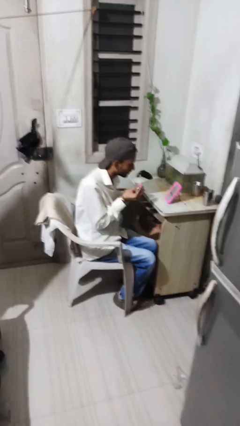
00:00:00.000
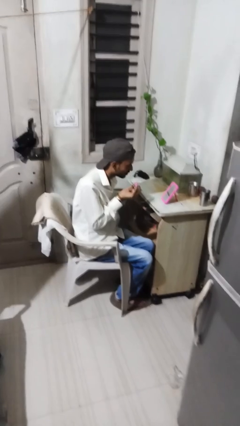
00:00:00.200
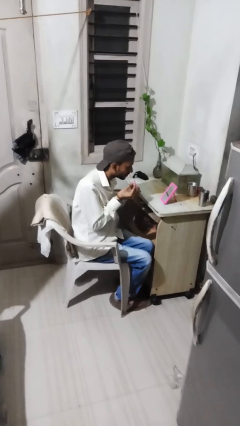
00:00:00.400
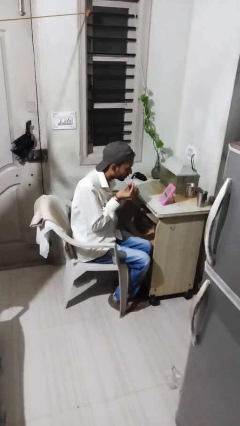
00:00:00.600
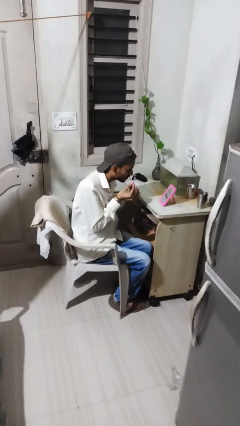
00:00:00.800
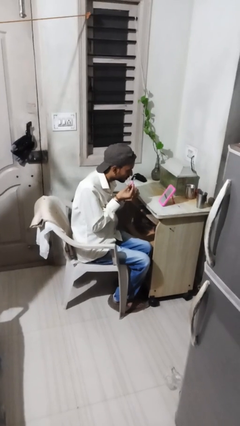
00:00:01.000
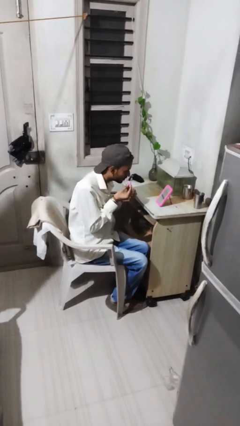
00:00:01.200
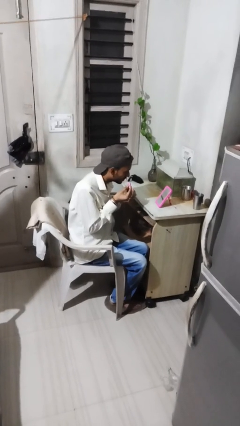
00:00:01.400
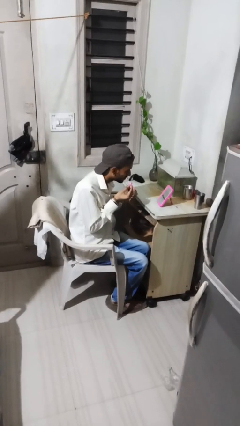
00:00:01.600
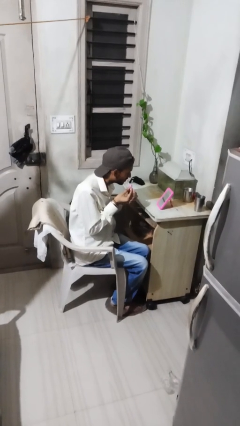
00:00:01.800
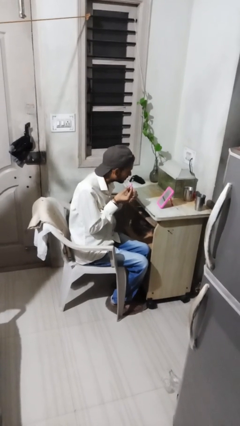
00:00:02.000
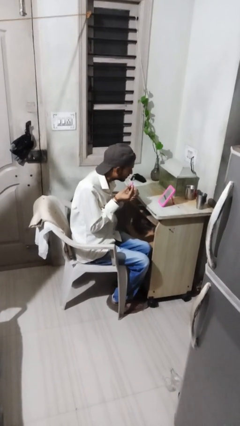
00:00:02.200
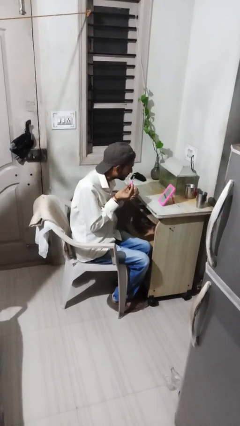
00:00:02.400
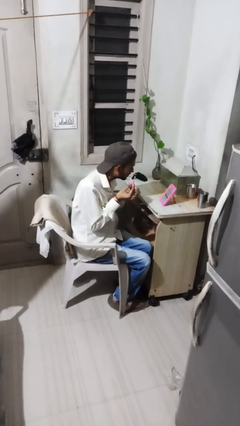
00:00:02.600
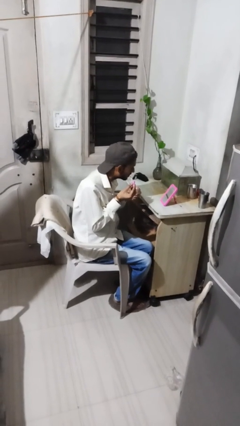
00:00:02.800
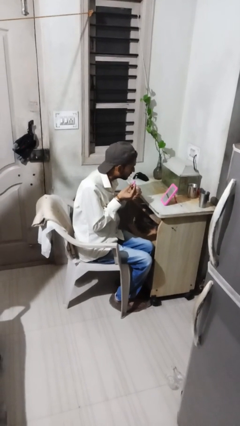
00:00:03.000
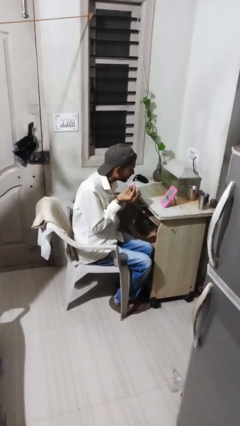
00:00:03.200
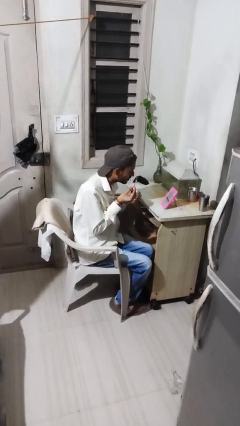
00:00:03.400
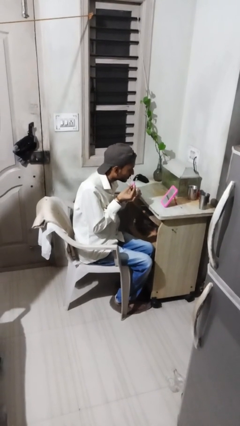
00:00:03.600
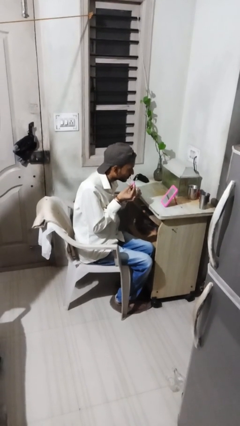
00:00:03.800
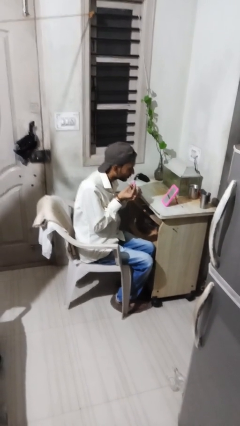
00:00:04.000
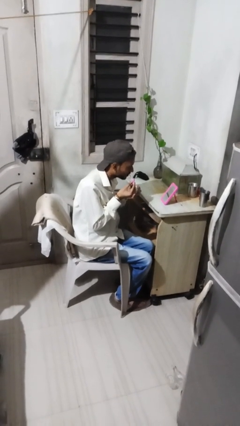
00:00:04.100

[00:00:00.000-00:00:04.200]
person applies lip makeup

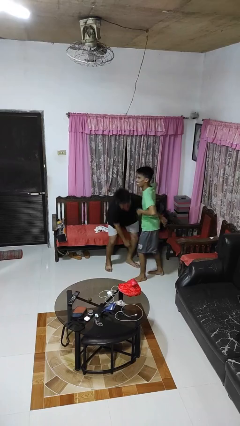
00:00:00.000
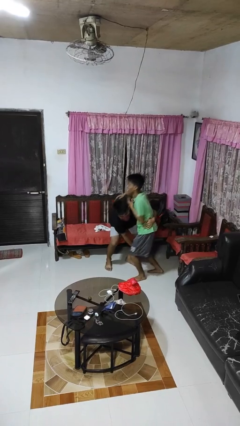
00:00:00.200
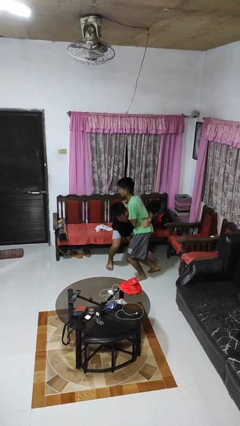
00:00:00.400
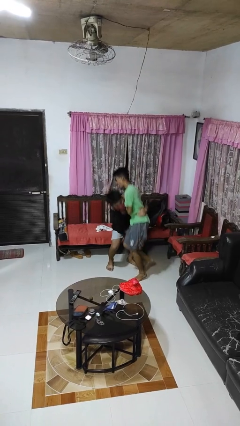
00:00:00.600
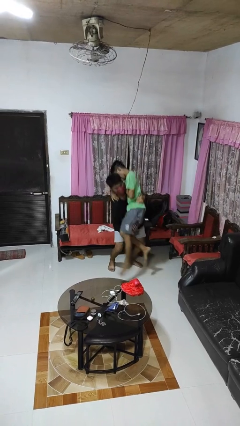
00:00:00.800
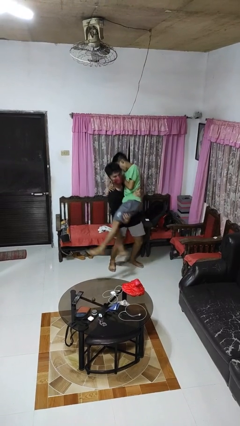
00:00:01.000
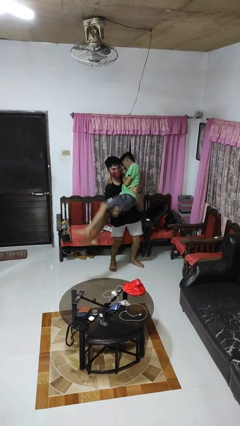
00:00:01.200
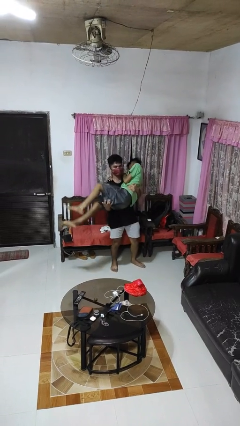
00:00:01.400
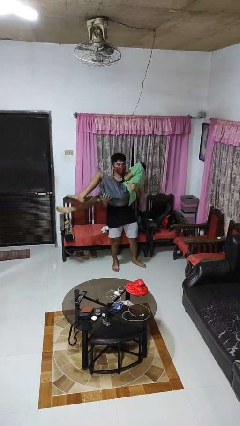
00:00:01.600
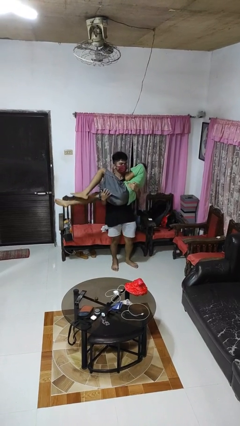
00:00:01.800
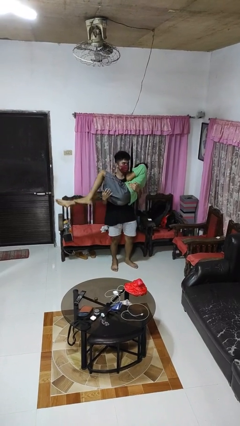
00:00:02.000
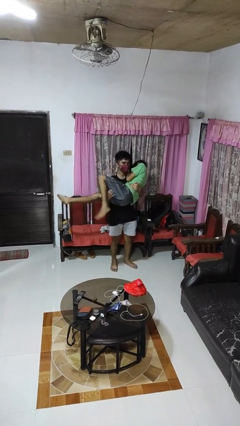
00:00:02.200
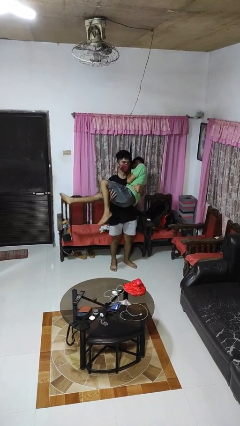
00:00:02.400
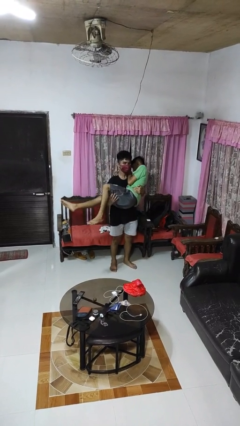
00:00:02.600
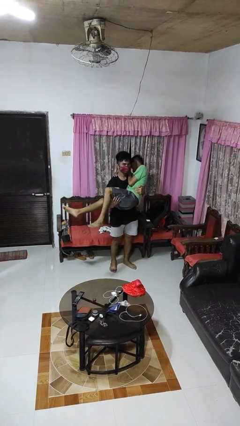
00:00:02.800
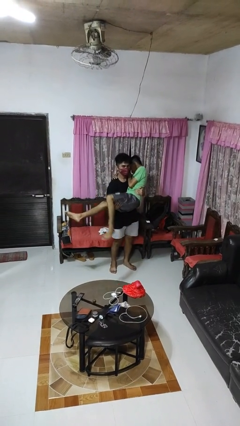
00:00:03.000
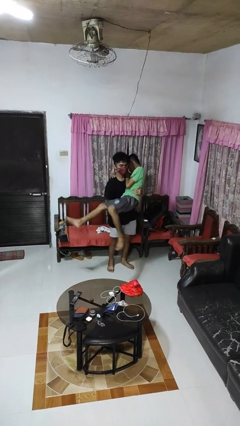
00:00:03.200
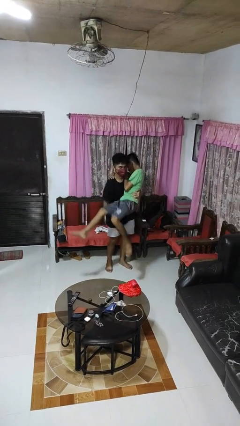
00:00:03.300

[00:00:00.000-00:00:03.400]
person picks up person

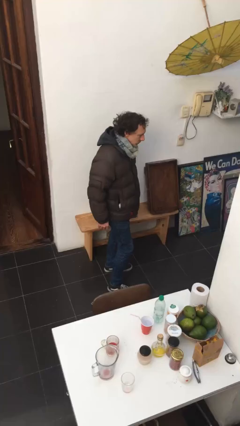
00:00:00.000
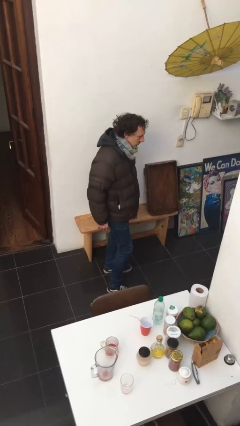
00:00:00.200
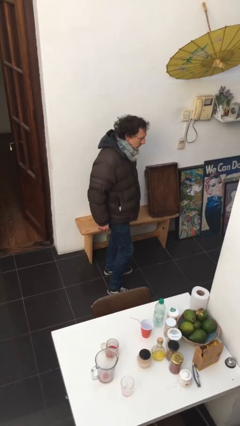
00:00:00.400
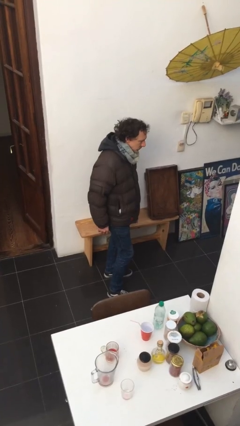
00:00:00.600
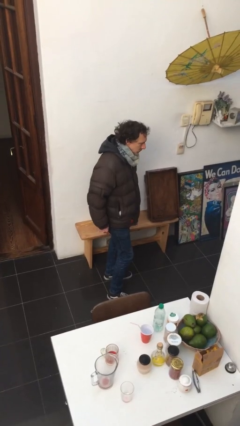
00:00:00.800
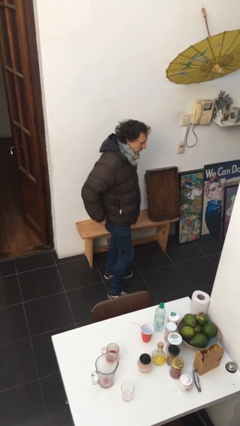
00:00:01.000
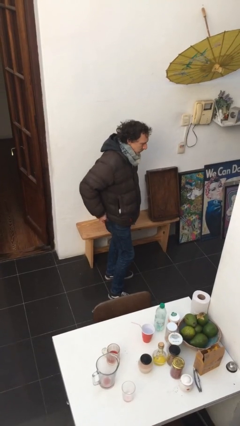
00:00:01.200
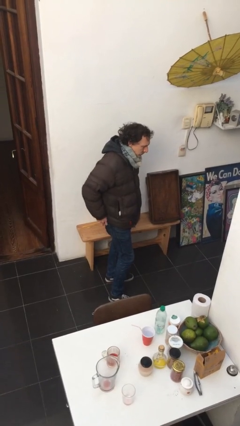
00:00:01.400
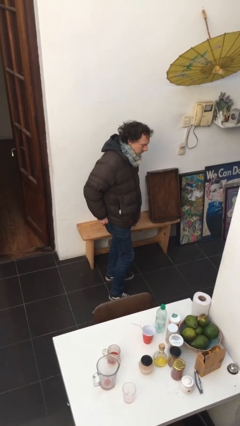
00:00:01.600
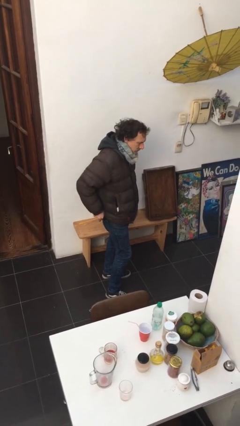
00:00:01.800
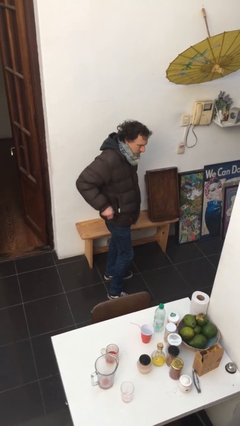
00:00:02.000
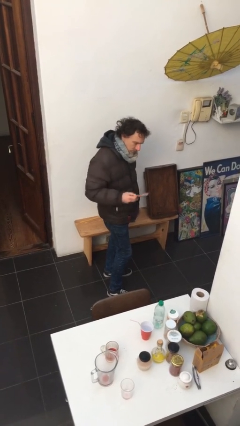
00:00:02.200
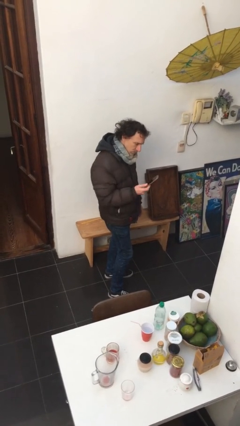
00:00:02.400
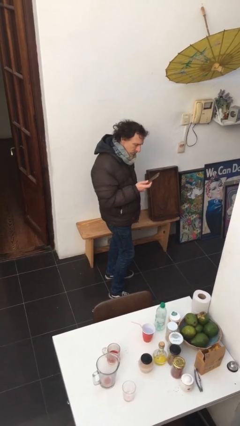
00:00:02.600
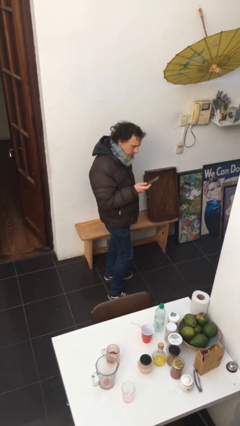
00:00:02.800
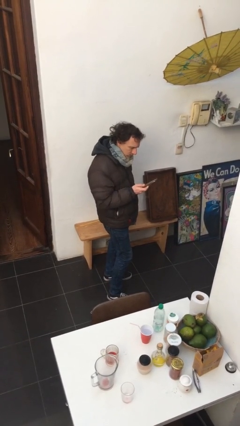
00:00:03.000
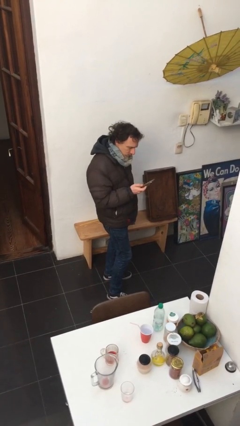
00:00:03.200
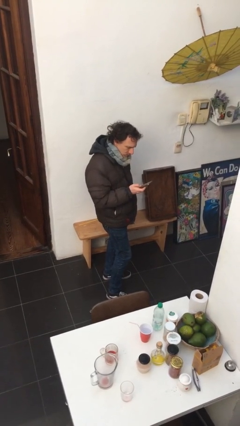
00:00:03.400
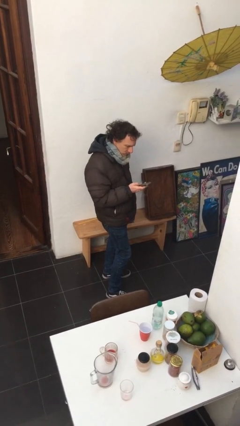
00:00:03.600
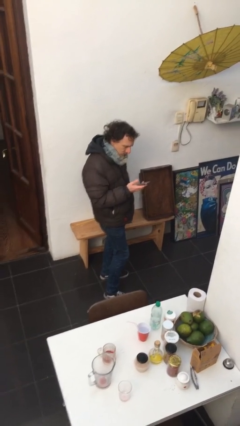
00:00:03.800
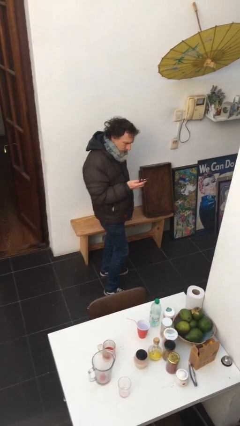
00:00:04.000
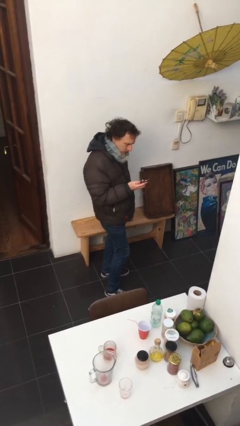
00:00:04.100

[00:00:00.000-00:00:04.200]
person takes phone from pocket

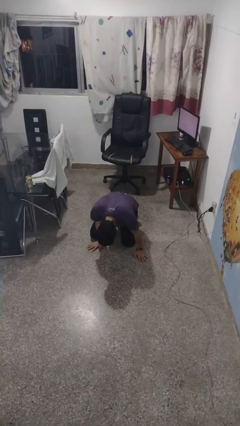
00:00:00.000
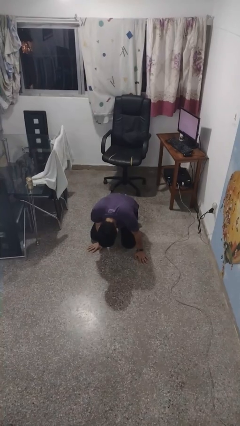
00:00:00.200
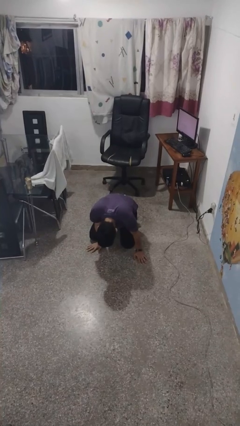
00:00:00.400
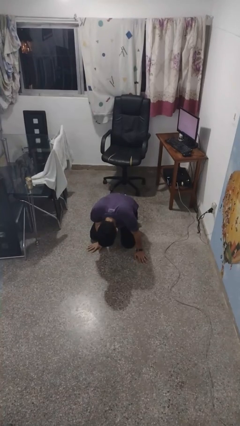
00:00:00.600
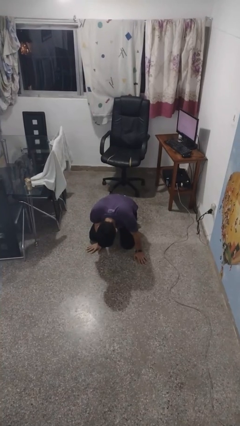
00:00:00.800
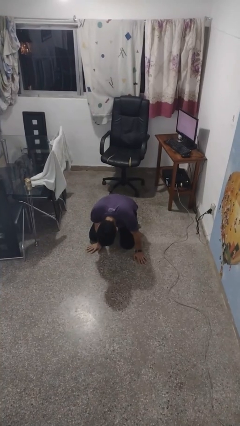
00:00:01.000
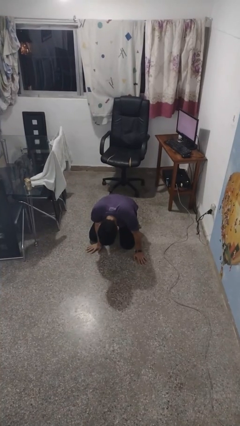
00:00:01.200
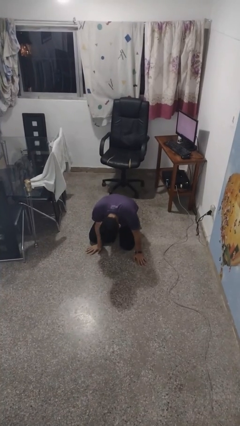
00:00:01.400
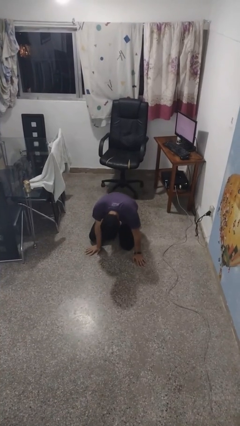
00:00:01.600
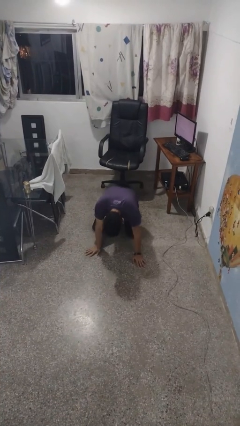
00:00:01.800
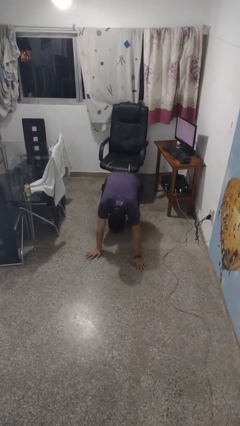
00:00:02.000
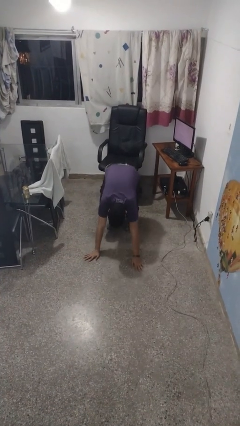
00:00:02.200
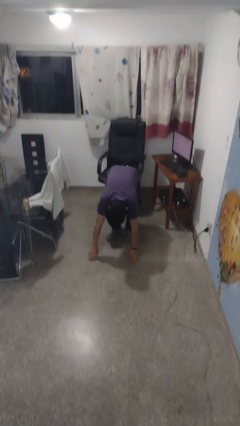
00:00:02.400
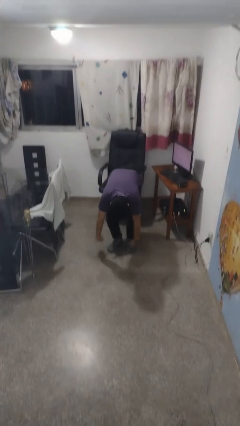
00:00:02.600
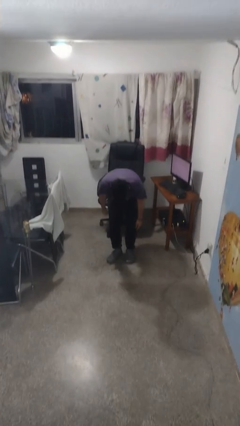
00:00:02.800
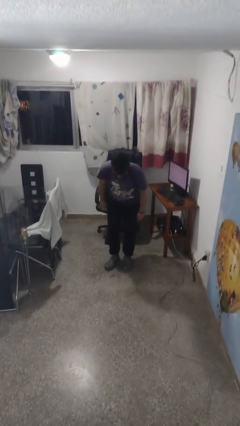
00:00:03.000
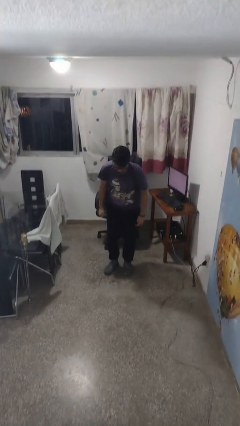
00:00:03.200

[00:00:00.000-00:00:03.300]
person stands up from floor

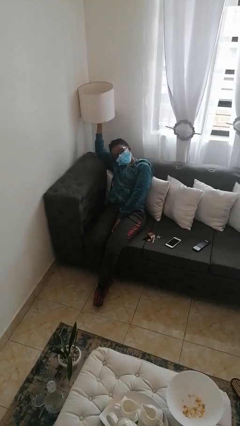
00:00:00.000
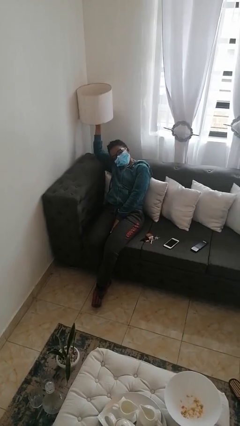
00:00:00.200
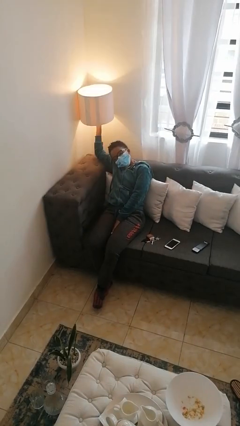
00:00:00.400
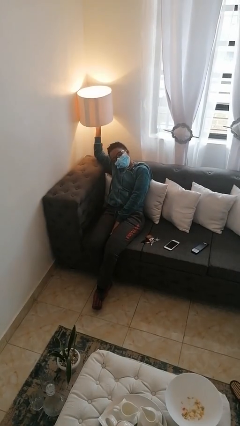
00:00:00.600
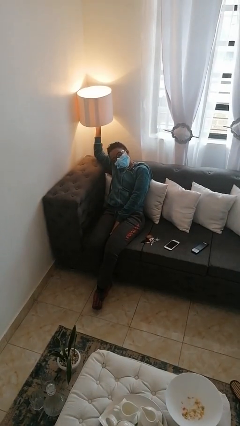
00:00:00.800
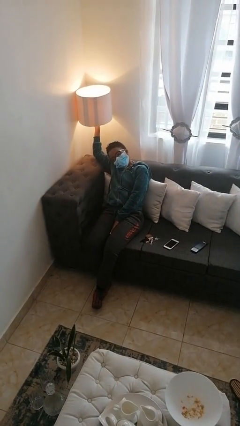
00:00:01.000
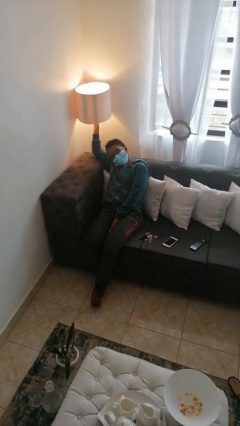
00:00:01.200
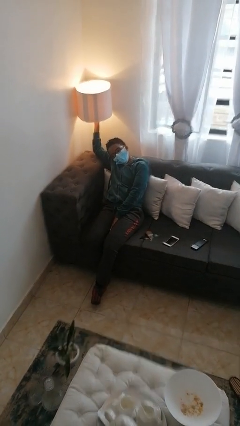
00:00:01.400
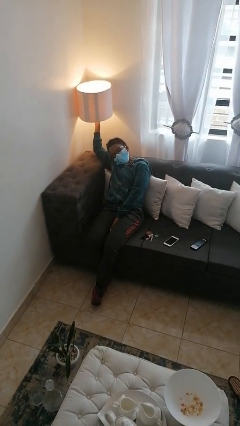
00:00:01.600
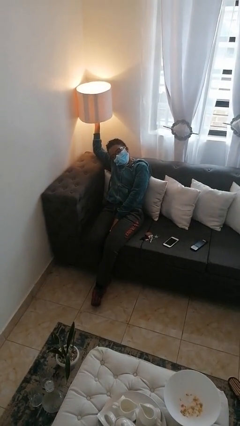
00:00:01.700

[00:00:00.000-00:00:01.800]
person turns on lamp

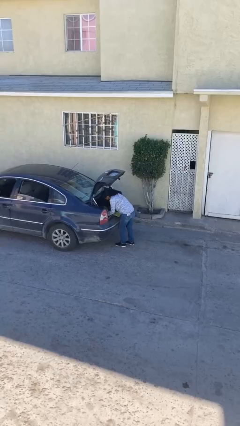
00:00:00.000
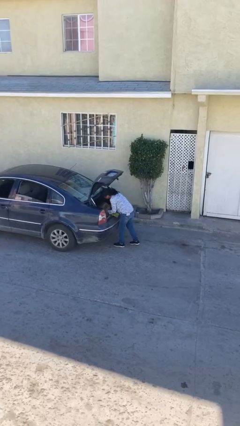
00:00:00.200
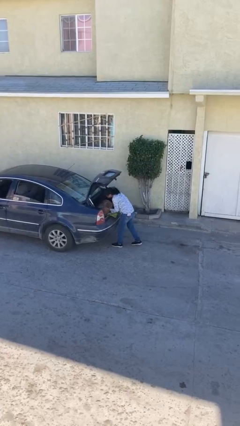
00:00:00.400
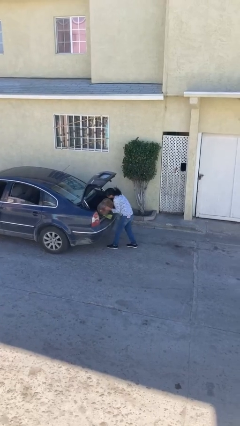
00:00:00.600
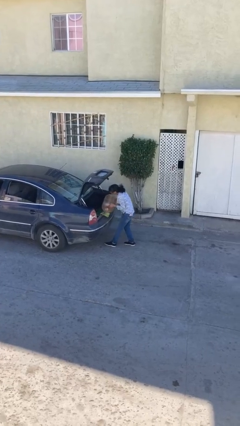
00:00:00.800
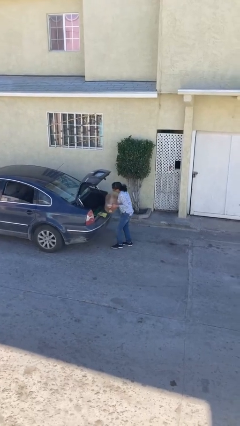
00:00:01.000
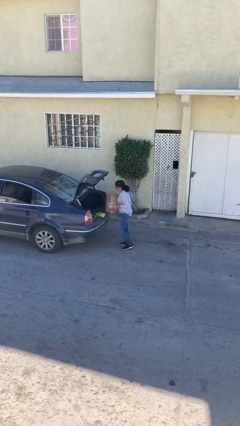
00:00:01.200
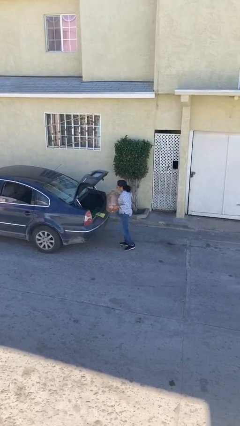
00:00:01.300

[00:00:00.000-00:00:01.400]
person unloads car
